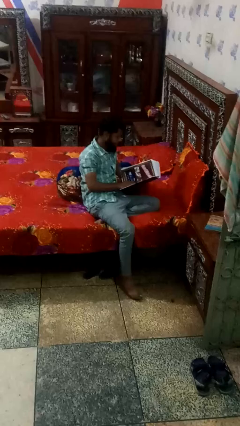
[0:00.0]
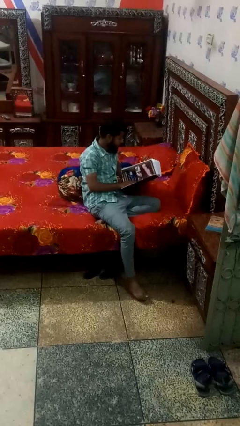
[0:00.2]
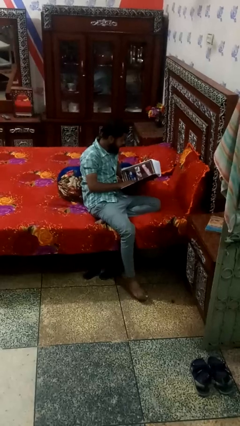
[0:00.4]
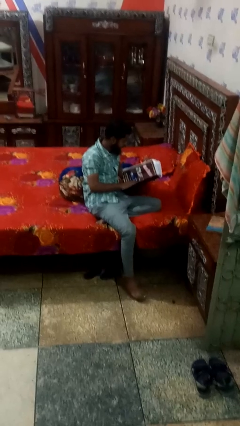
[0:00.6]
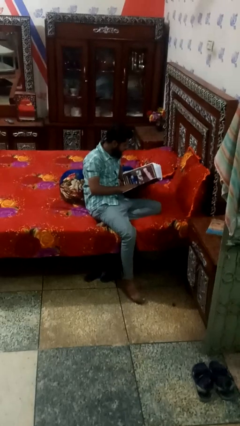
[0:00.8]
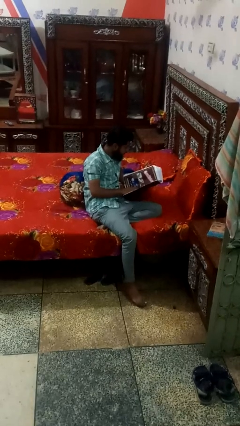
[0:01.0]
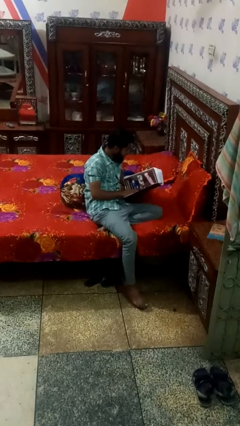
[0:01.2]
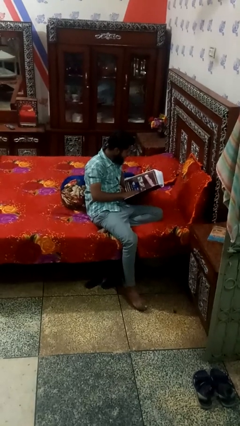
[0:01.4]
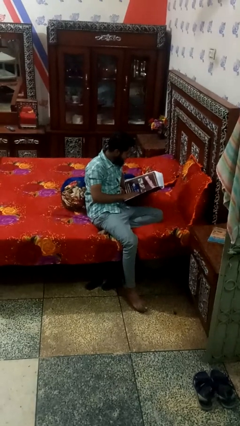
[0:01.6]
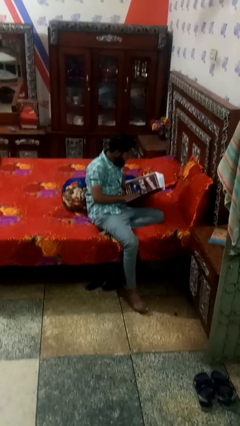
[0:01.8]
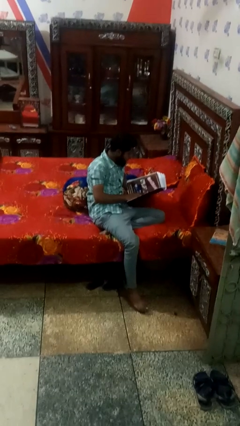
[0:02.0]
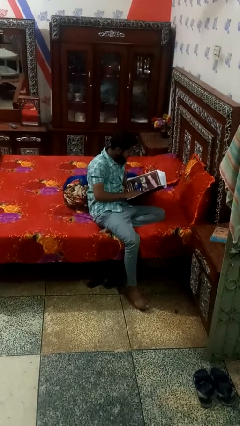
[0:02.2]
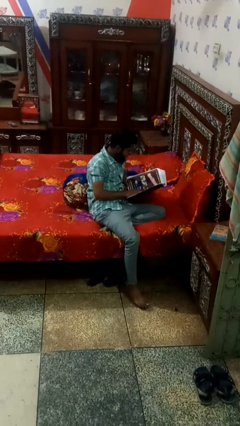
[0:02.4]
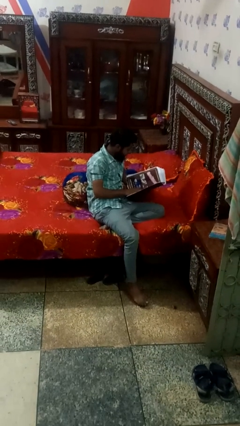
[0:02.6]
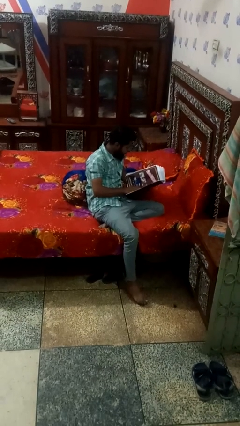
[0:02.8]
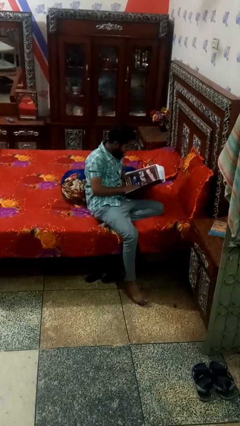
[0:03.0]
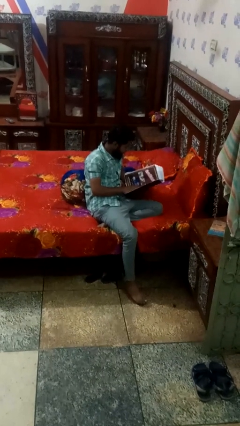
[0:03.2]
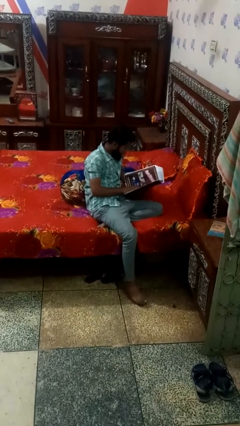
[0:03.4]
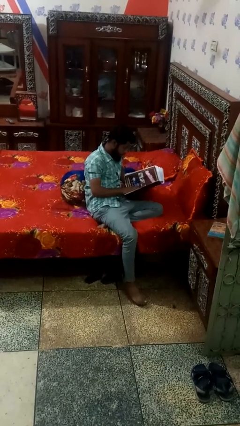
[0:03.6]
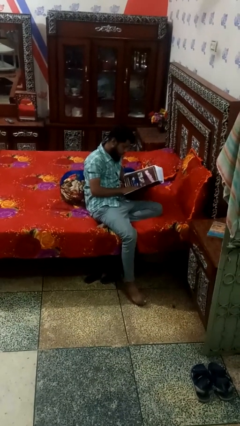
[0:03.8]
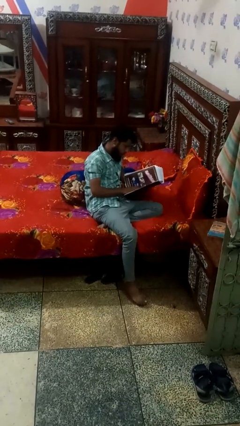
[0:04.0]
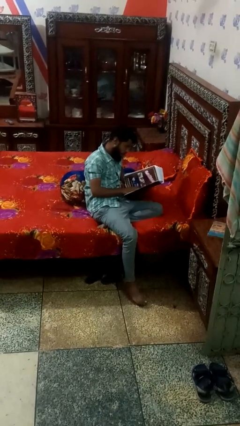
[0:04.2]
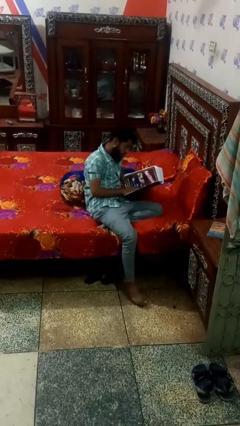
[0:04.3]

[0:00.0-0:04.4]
person reads magazine

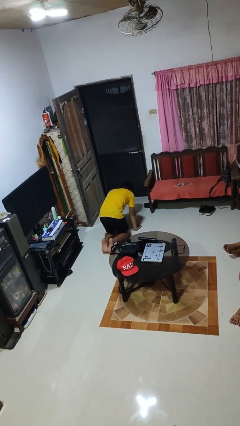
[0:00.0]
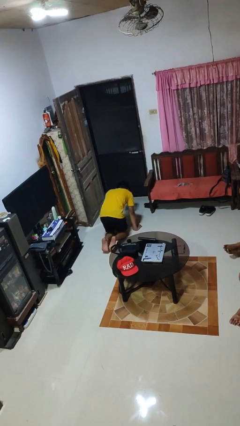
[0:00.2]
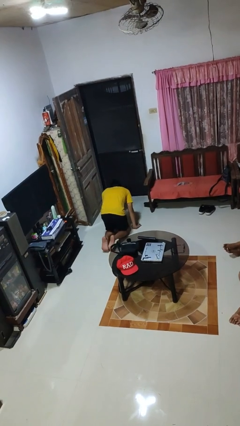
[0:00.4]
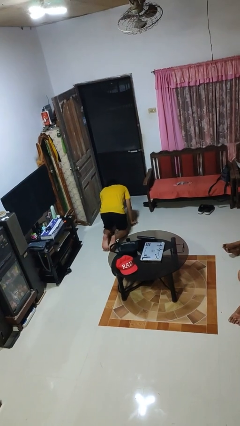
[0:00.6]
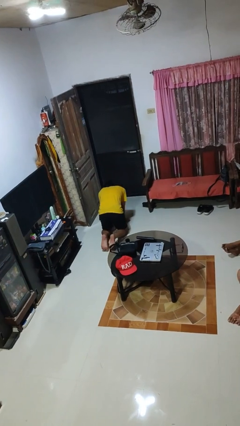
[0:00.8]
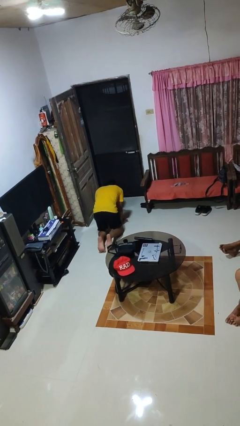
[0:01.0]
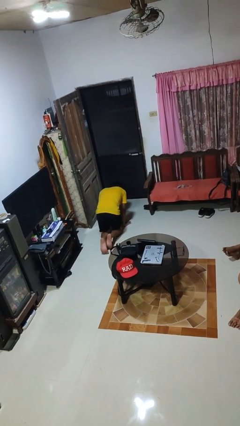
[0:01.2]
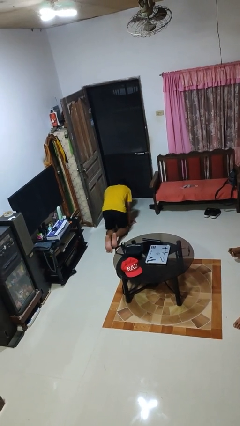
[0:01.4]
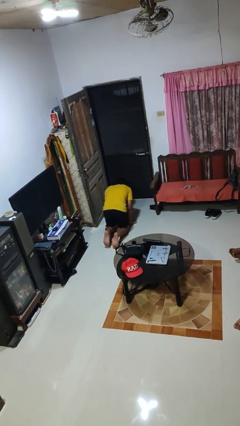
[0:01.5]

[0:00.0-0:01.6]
person crawls

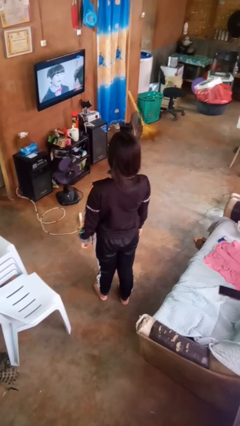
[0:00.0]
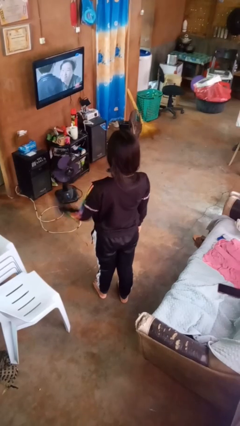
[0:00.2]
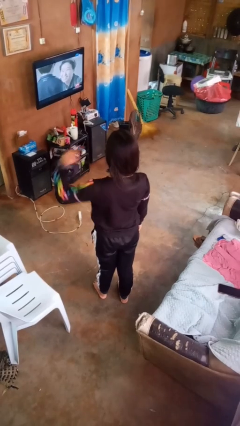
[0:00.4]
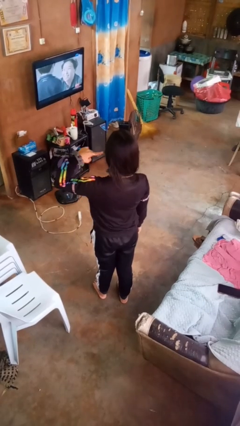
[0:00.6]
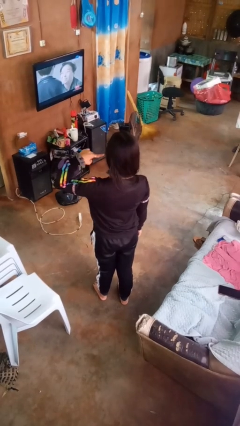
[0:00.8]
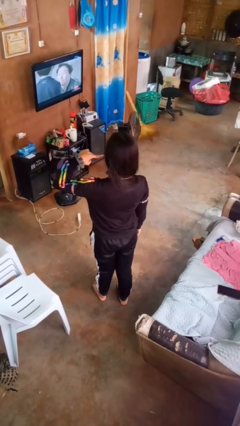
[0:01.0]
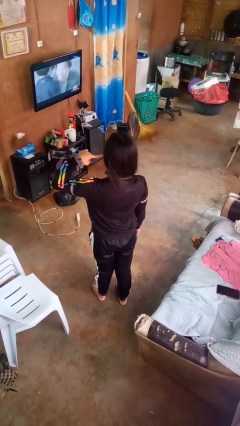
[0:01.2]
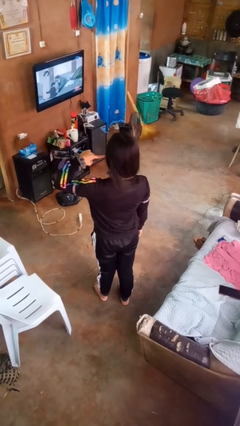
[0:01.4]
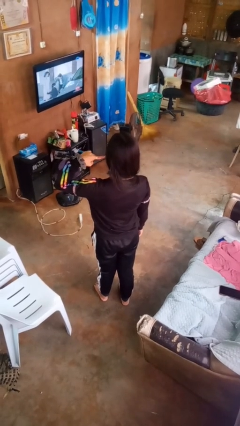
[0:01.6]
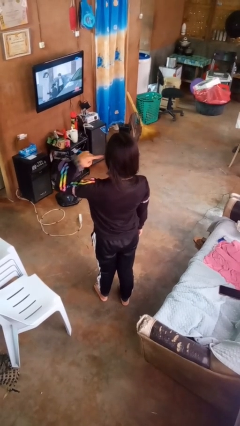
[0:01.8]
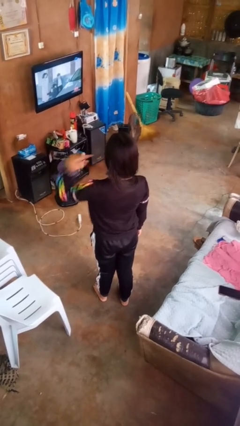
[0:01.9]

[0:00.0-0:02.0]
person gestures listen closely

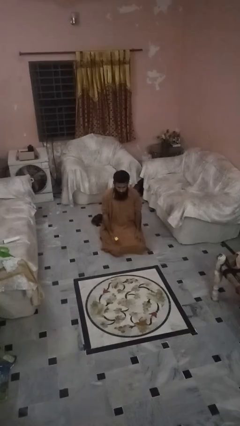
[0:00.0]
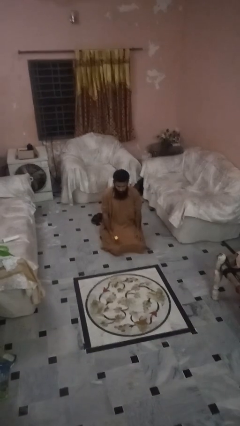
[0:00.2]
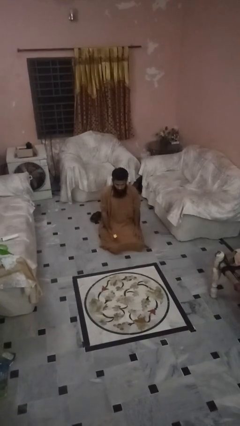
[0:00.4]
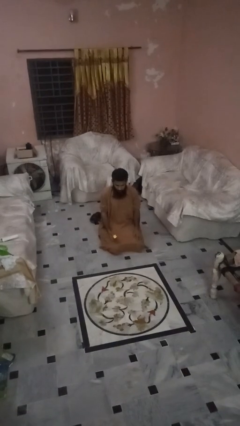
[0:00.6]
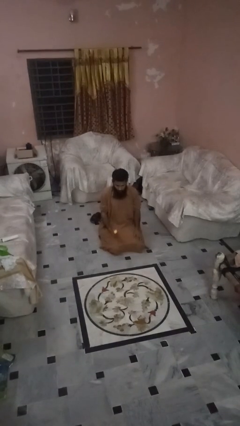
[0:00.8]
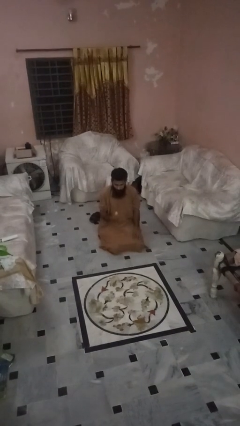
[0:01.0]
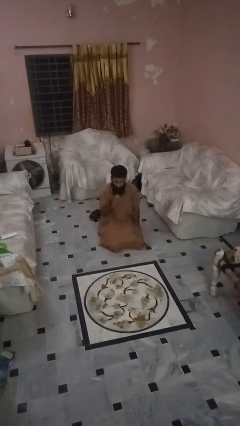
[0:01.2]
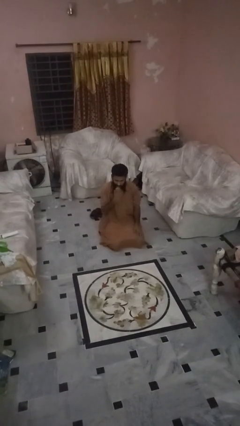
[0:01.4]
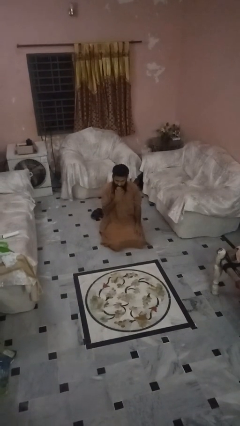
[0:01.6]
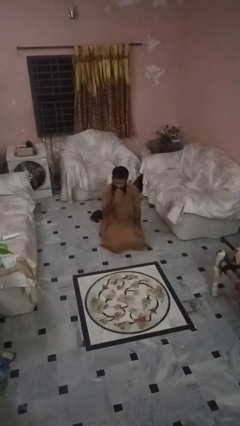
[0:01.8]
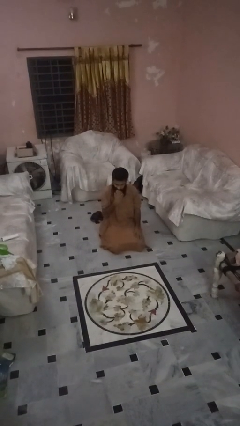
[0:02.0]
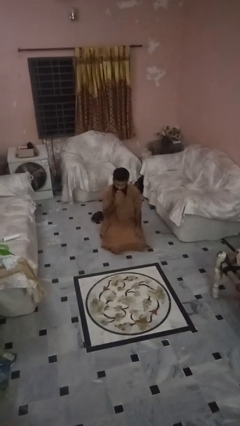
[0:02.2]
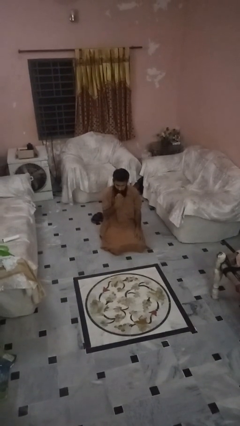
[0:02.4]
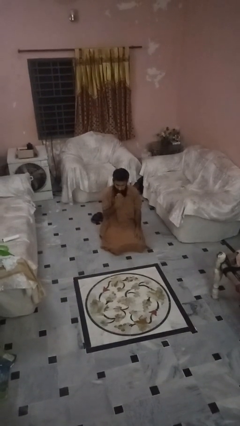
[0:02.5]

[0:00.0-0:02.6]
person eats apple

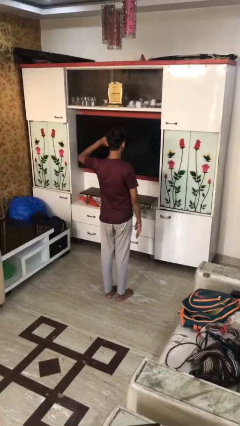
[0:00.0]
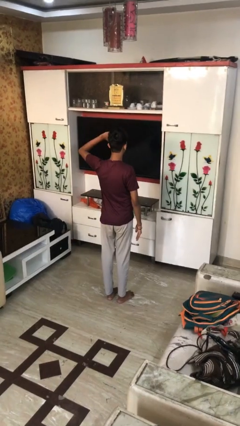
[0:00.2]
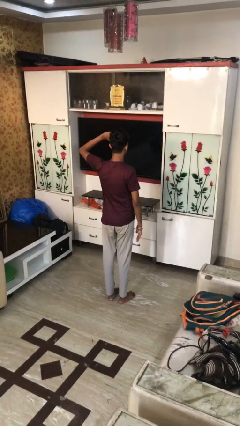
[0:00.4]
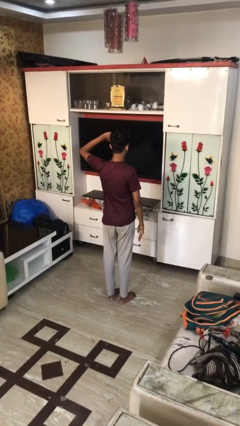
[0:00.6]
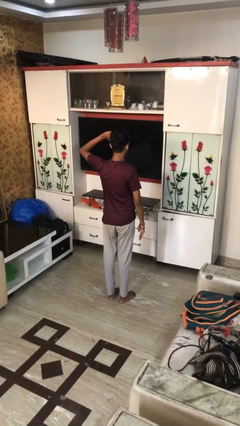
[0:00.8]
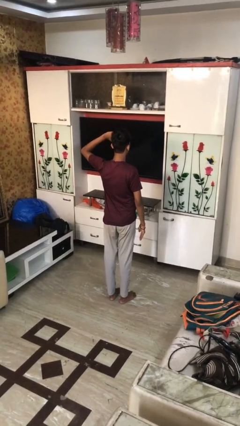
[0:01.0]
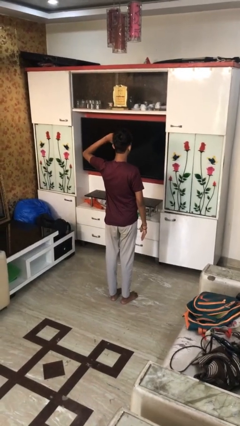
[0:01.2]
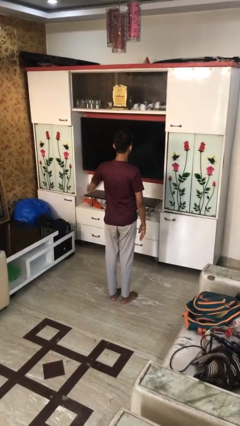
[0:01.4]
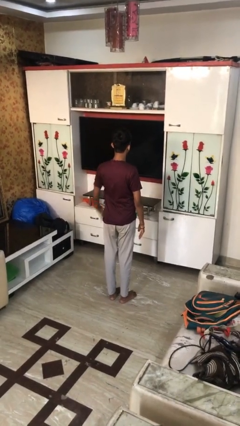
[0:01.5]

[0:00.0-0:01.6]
person salutes

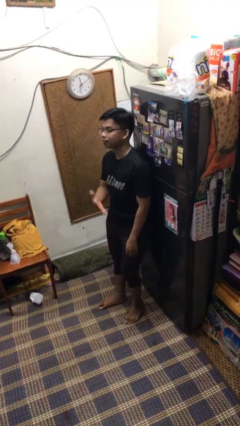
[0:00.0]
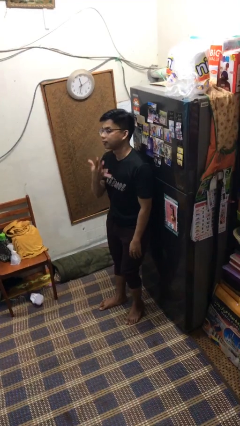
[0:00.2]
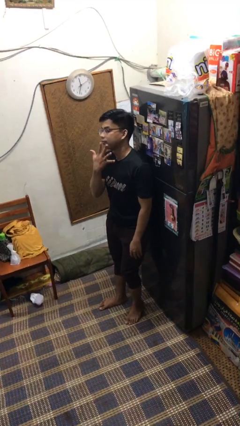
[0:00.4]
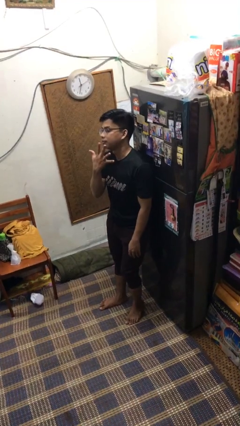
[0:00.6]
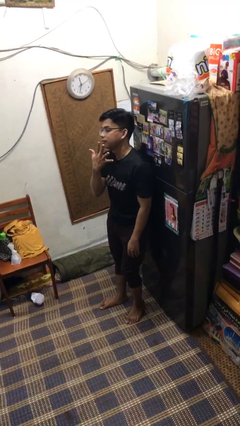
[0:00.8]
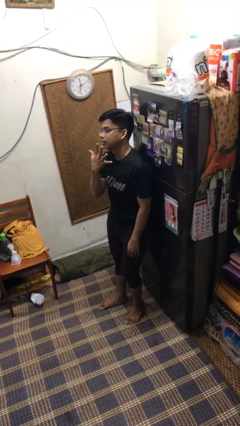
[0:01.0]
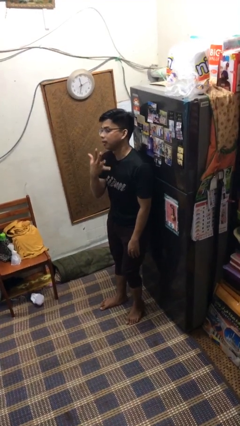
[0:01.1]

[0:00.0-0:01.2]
person gestures number five

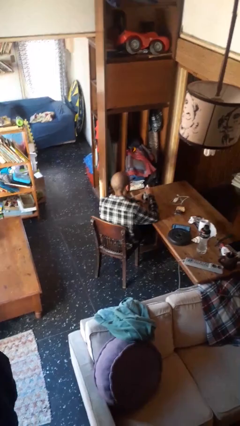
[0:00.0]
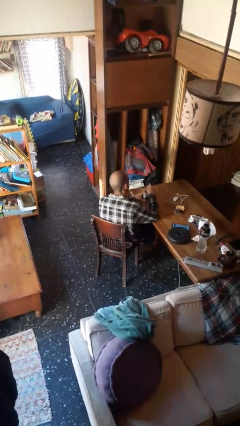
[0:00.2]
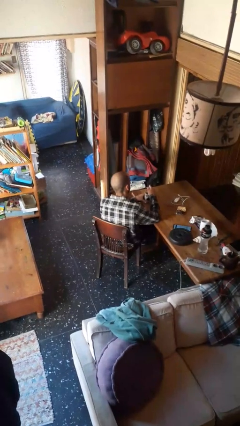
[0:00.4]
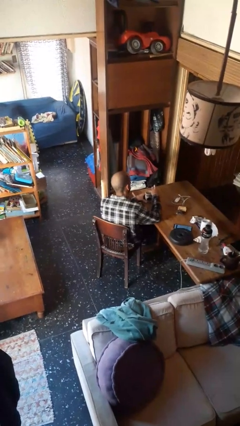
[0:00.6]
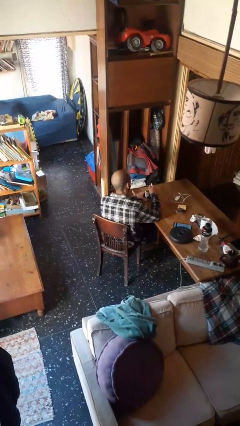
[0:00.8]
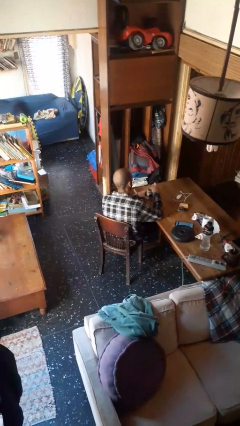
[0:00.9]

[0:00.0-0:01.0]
person stirs mug

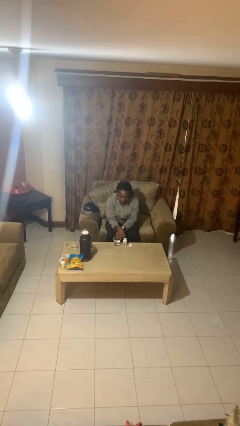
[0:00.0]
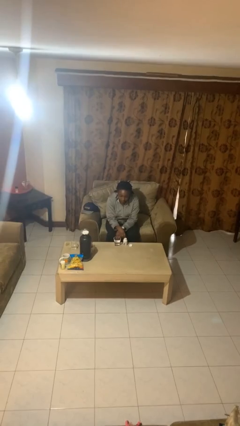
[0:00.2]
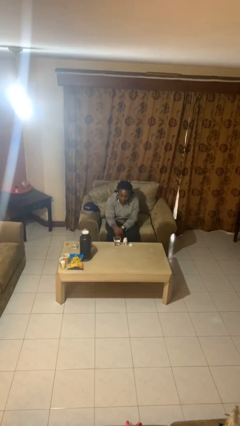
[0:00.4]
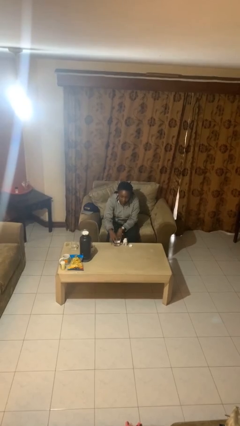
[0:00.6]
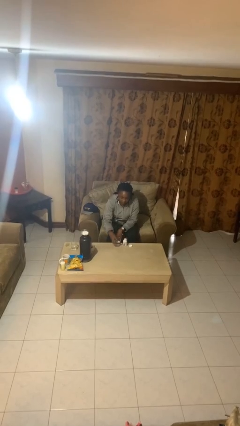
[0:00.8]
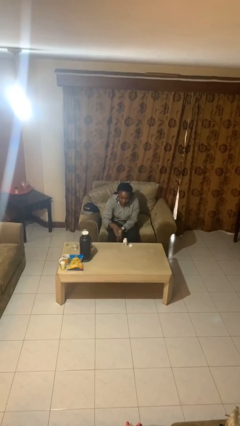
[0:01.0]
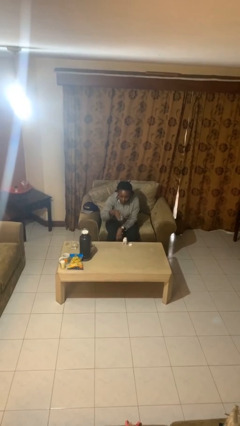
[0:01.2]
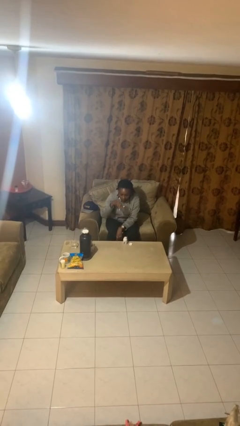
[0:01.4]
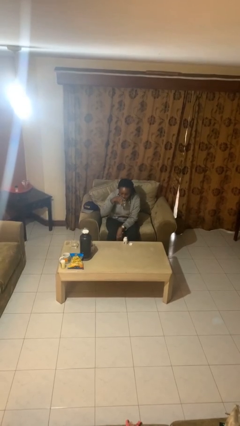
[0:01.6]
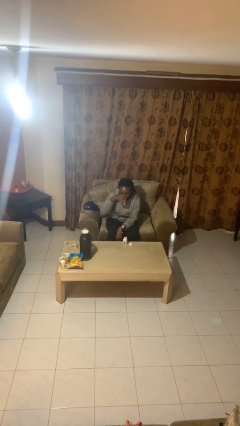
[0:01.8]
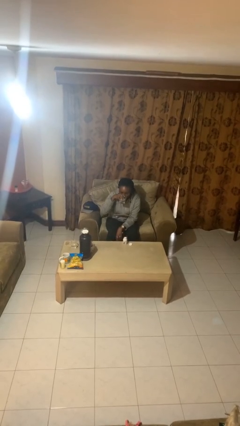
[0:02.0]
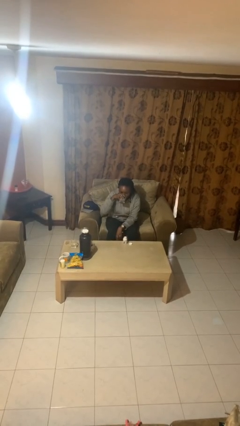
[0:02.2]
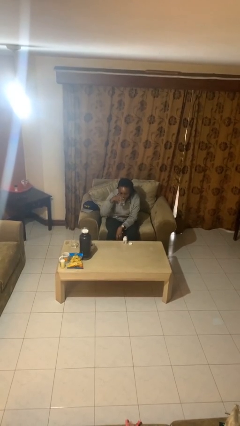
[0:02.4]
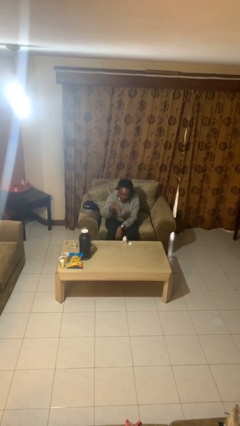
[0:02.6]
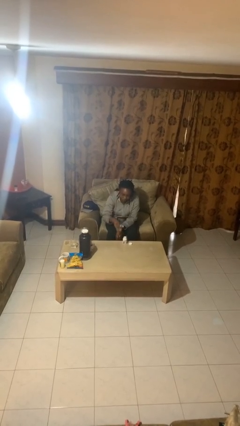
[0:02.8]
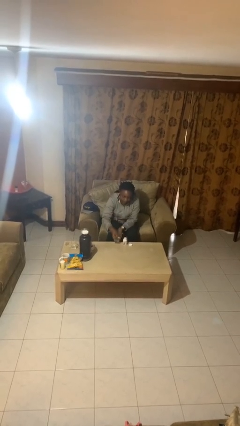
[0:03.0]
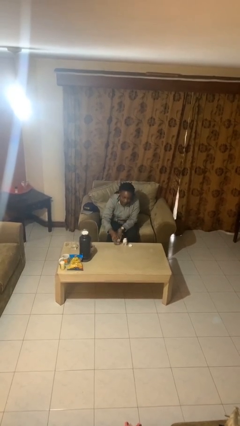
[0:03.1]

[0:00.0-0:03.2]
person drinks from cup
